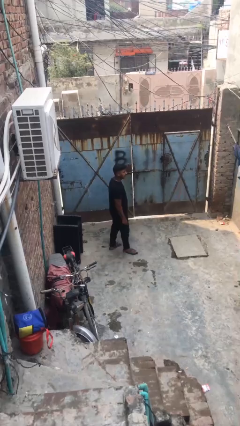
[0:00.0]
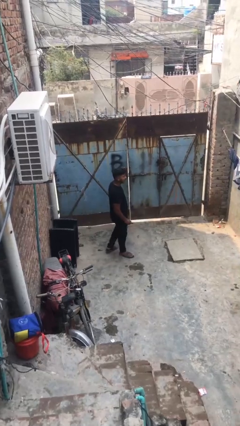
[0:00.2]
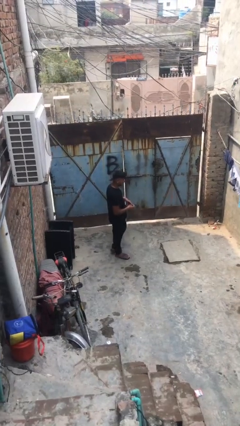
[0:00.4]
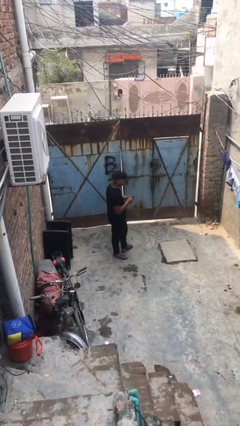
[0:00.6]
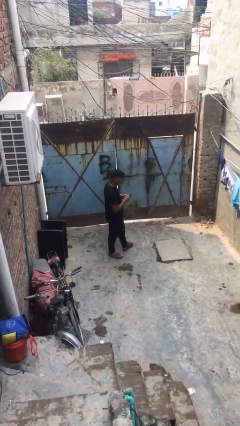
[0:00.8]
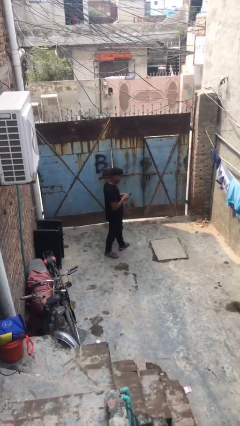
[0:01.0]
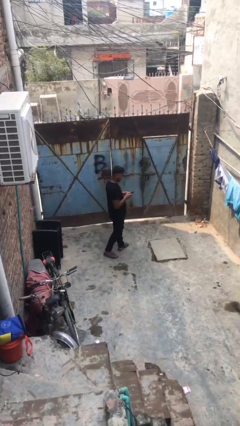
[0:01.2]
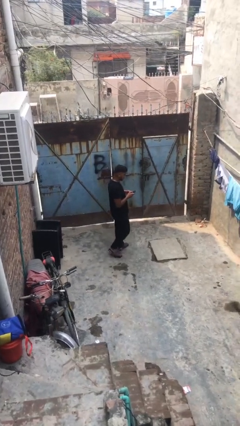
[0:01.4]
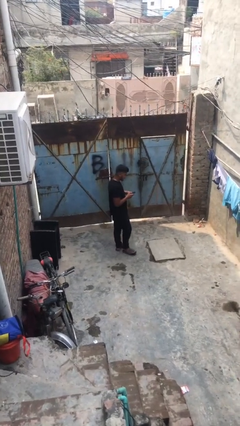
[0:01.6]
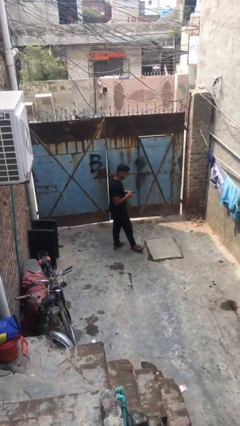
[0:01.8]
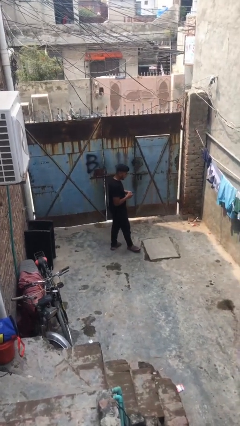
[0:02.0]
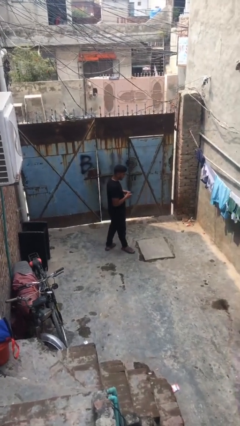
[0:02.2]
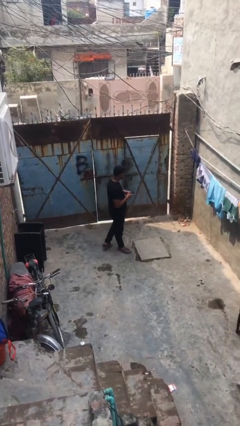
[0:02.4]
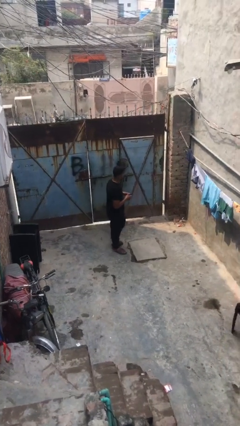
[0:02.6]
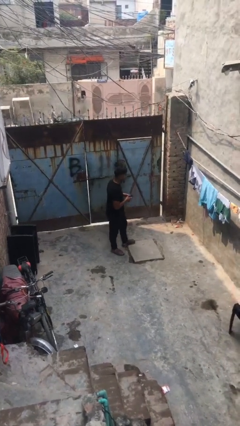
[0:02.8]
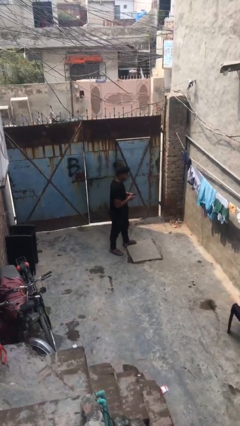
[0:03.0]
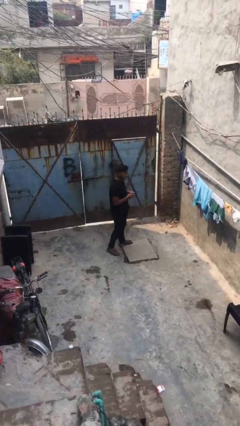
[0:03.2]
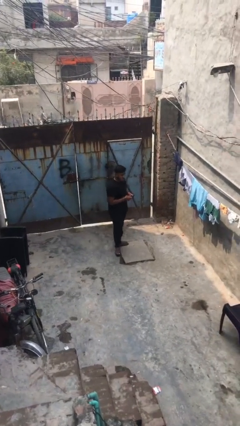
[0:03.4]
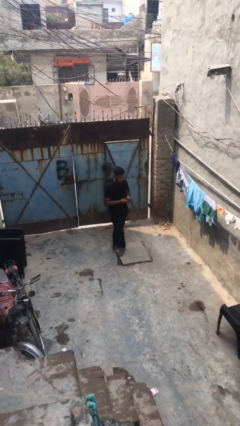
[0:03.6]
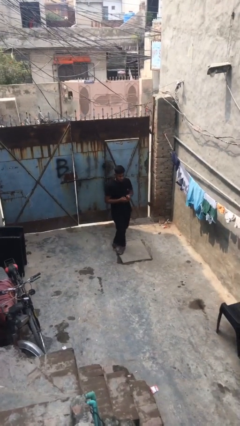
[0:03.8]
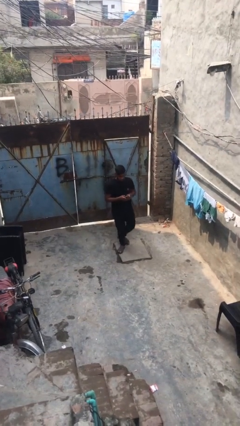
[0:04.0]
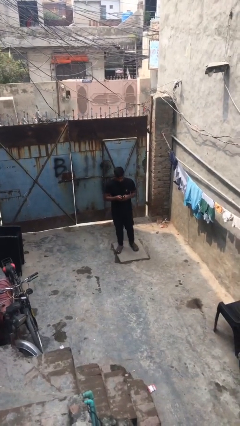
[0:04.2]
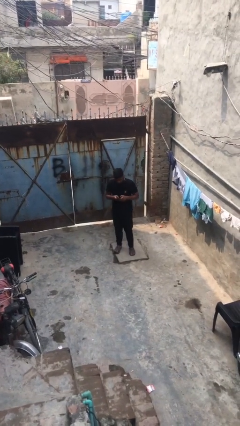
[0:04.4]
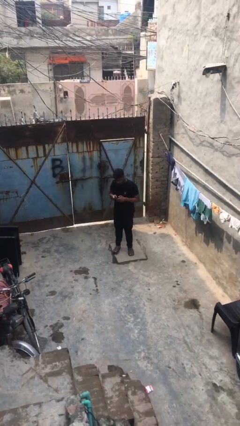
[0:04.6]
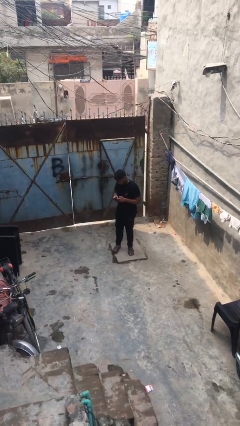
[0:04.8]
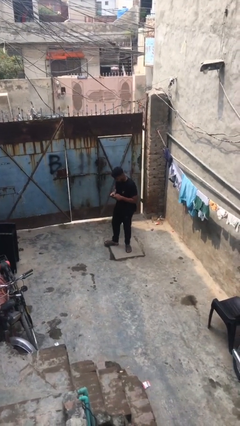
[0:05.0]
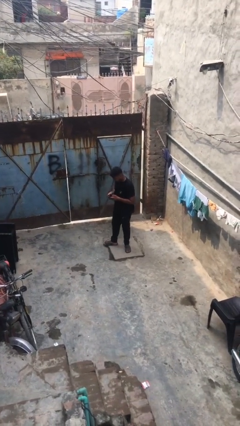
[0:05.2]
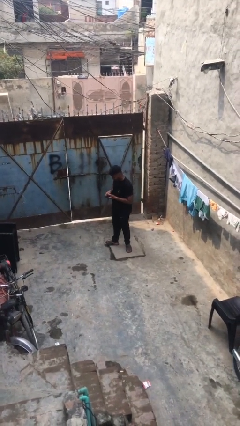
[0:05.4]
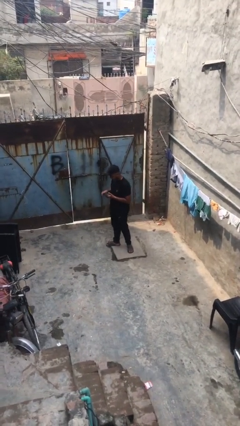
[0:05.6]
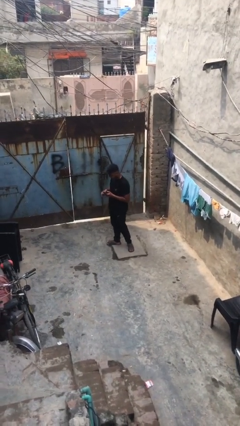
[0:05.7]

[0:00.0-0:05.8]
person texts on phone

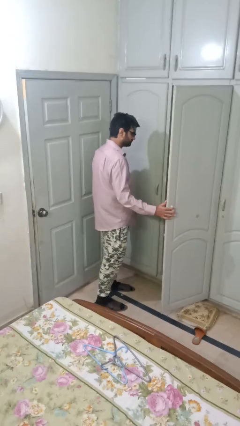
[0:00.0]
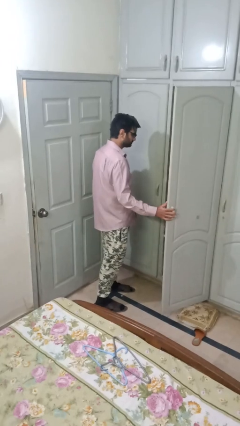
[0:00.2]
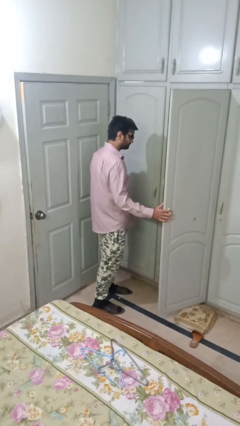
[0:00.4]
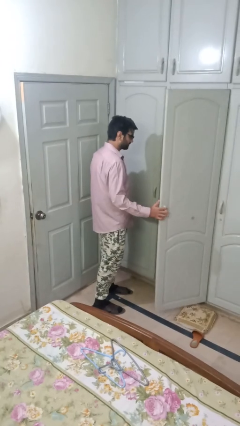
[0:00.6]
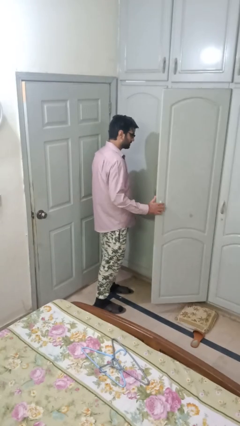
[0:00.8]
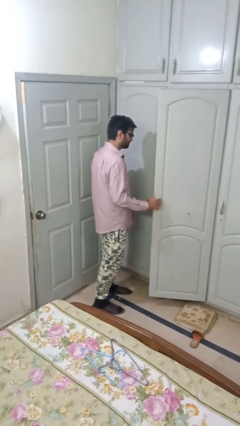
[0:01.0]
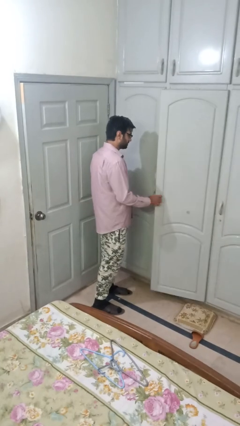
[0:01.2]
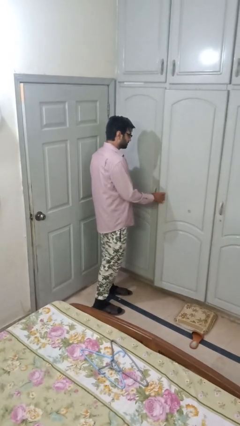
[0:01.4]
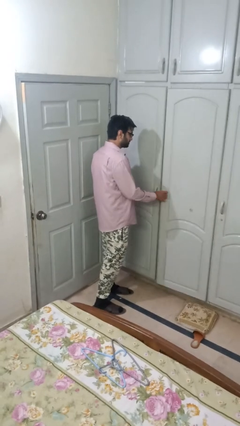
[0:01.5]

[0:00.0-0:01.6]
person closes closet door

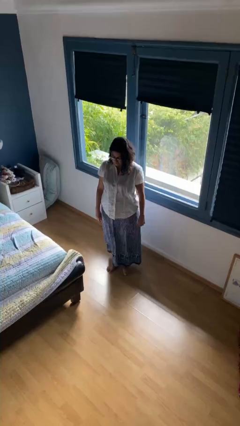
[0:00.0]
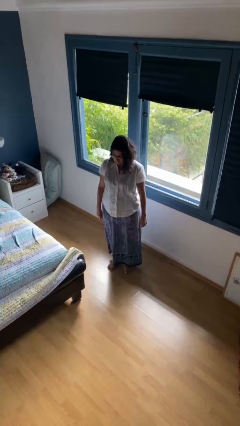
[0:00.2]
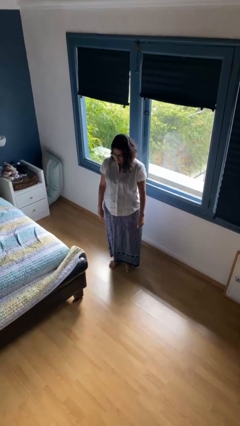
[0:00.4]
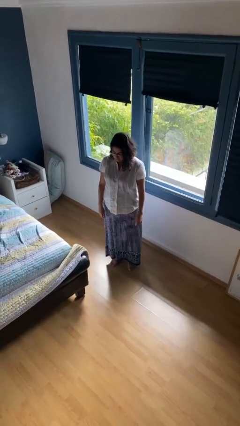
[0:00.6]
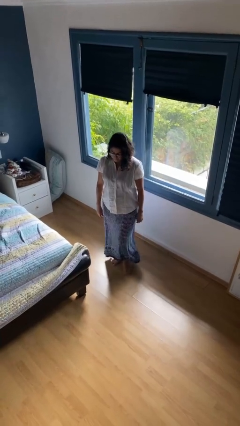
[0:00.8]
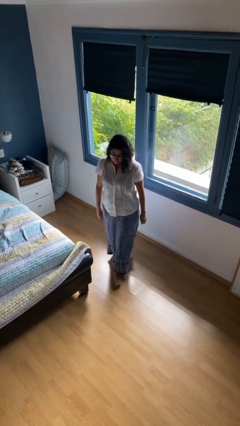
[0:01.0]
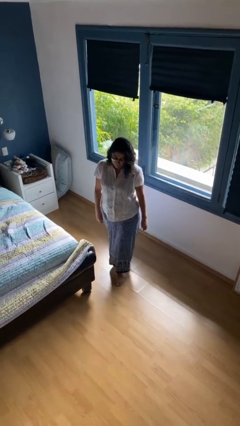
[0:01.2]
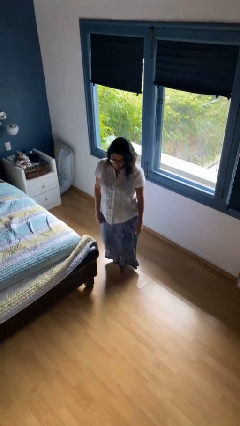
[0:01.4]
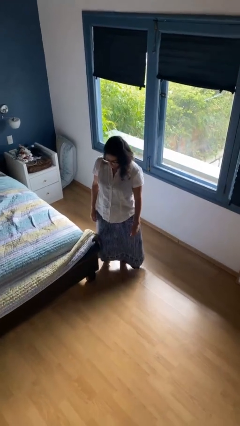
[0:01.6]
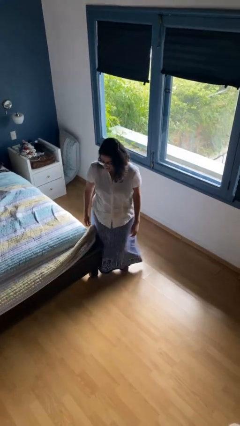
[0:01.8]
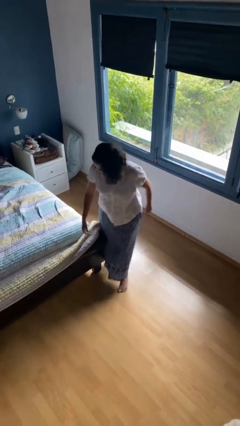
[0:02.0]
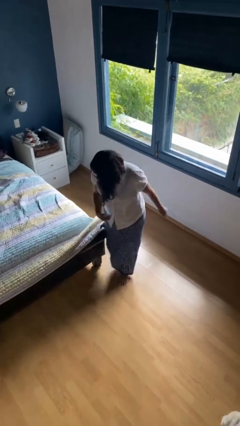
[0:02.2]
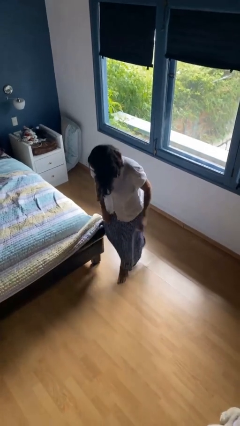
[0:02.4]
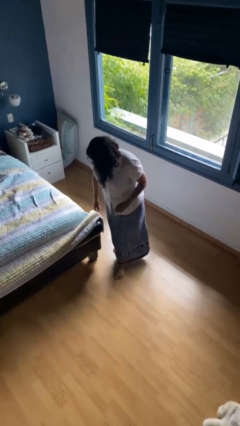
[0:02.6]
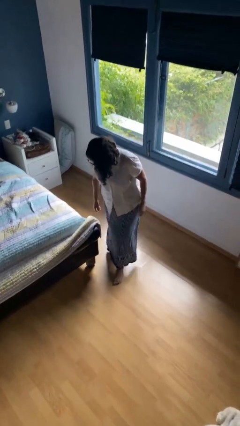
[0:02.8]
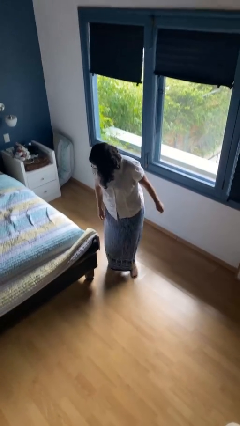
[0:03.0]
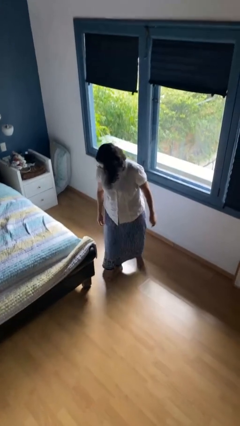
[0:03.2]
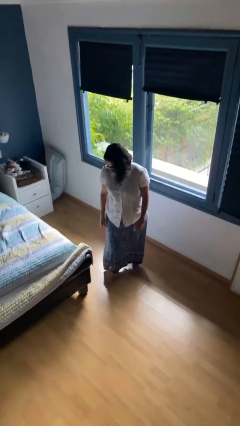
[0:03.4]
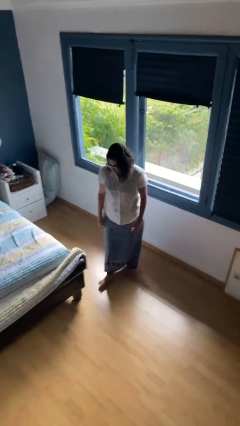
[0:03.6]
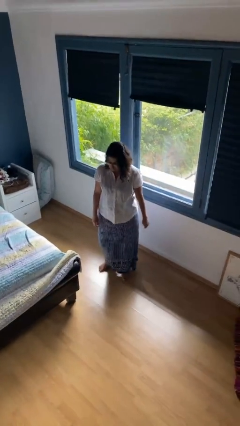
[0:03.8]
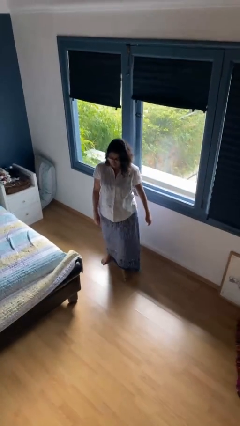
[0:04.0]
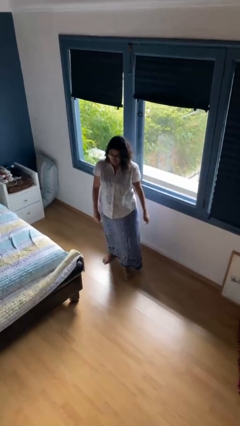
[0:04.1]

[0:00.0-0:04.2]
person stubs toe

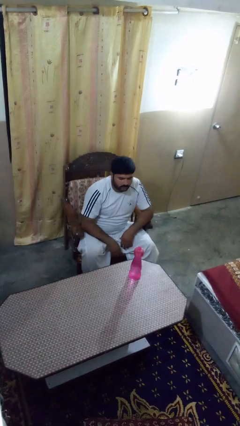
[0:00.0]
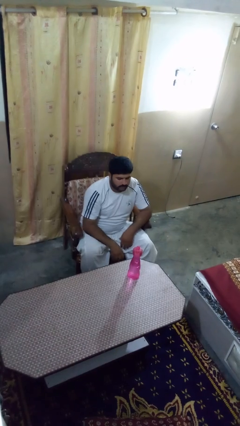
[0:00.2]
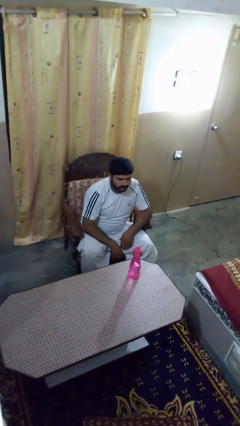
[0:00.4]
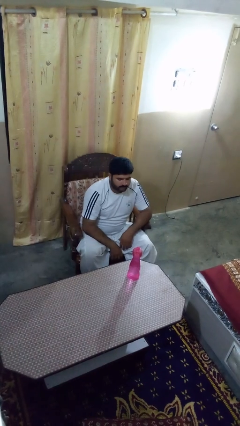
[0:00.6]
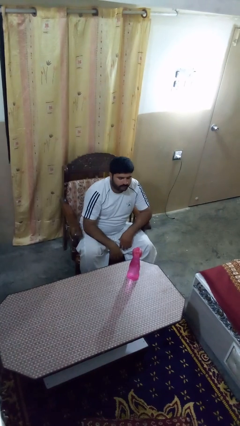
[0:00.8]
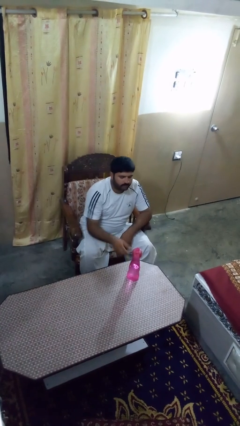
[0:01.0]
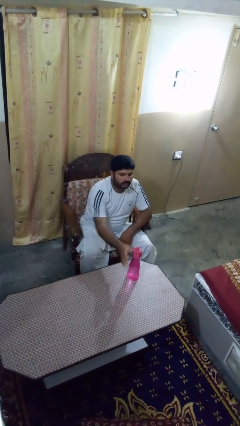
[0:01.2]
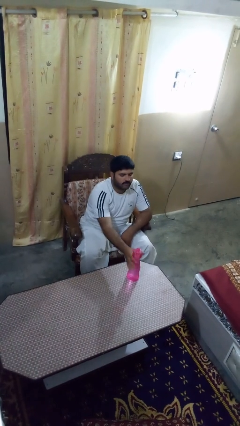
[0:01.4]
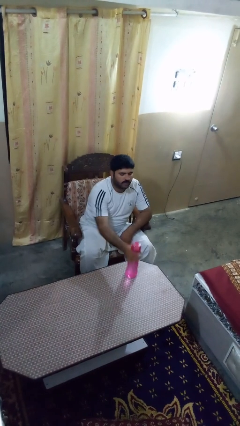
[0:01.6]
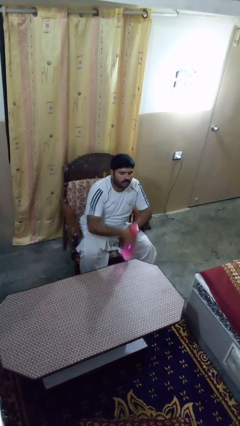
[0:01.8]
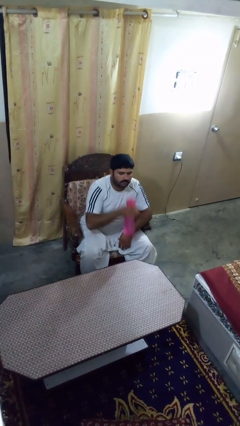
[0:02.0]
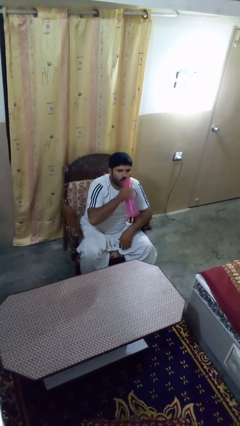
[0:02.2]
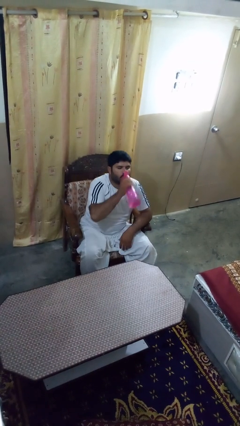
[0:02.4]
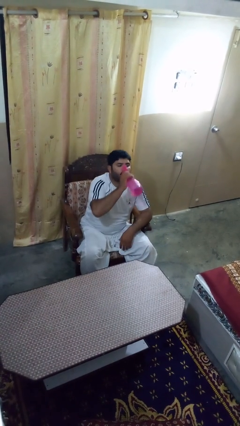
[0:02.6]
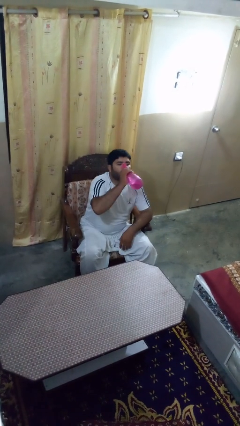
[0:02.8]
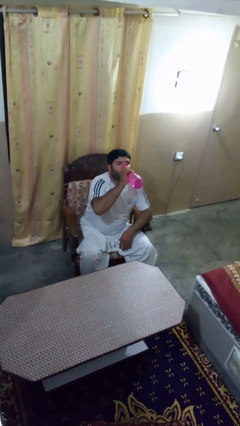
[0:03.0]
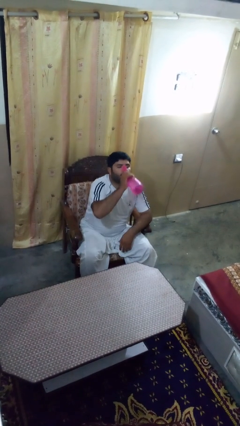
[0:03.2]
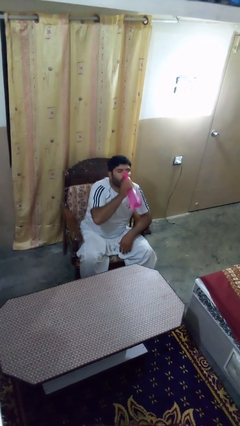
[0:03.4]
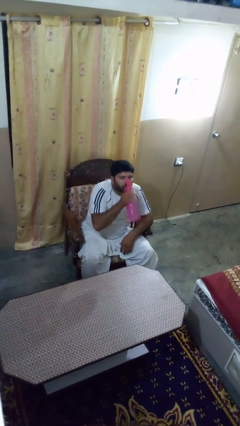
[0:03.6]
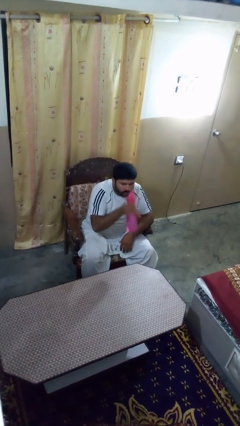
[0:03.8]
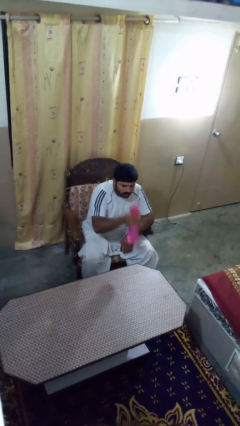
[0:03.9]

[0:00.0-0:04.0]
person drinks from bottle

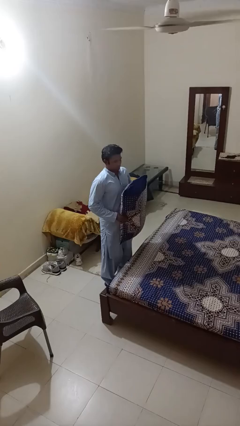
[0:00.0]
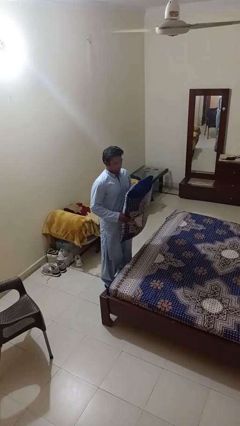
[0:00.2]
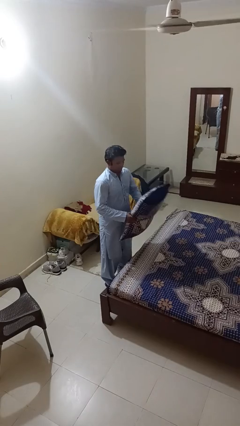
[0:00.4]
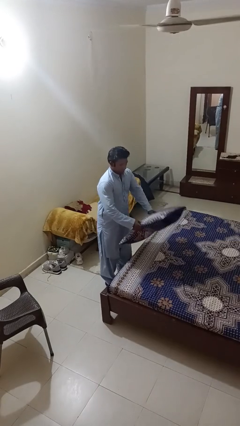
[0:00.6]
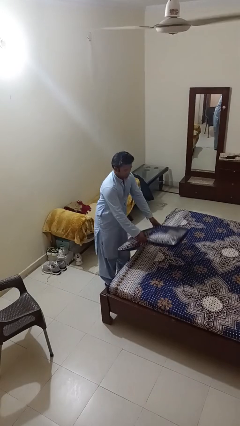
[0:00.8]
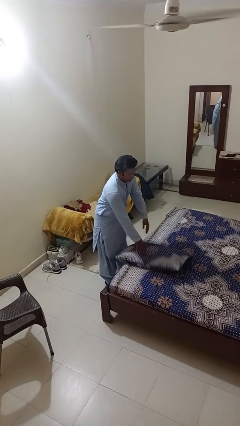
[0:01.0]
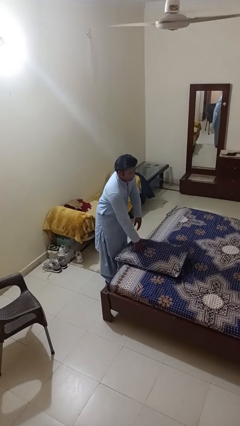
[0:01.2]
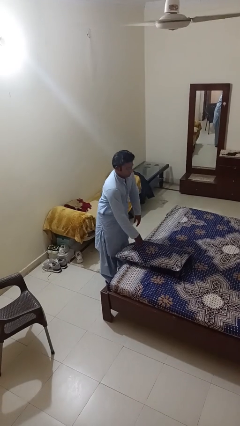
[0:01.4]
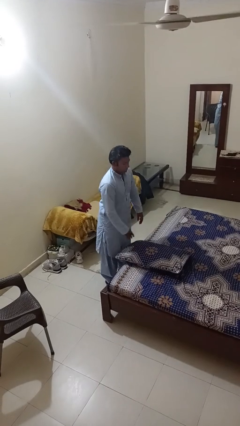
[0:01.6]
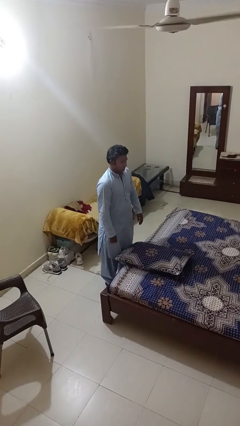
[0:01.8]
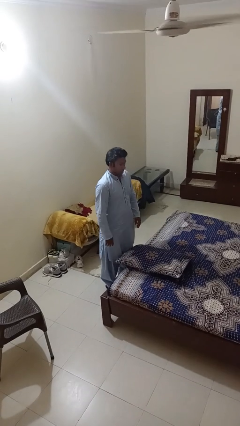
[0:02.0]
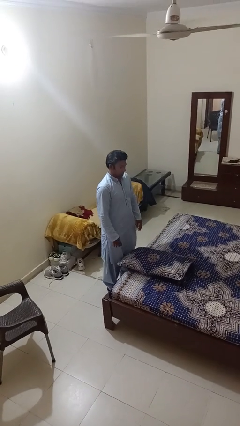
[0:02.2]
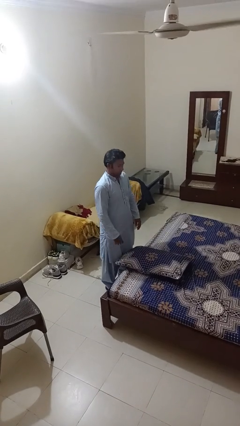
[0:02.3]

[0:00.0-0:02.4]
person puts down object on bed

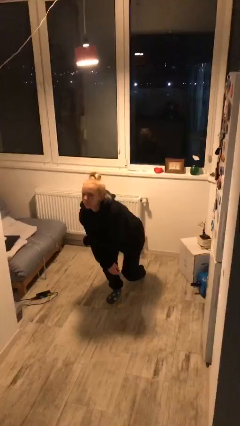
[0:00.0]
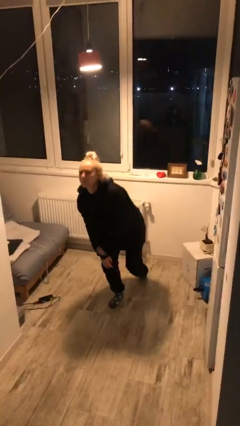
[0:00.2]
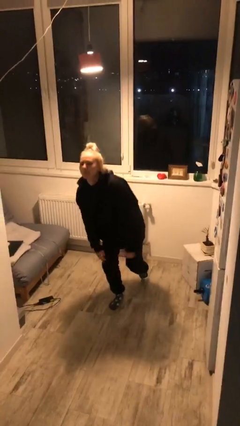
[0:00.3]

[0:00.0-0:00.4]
person stands up
